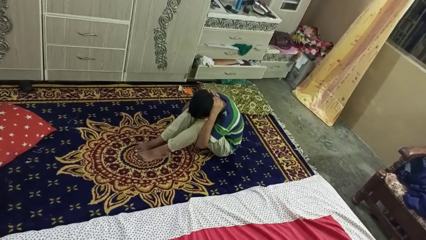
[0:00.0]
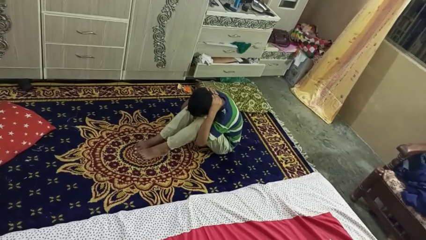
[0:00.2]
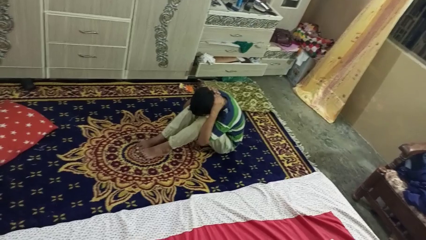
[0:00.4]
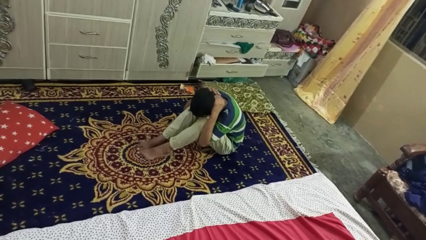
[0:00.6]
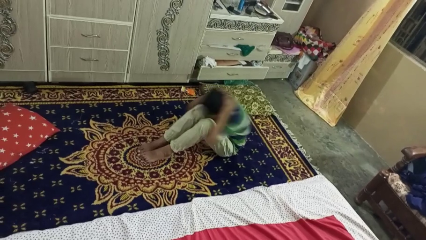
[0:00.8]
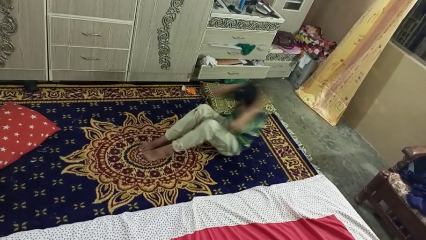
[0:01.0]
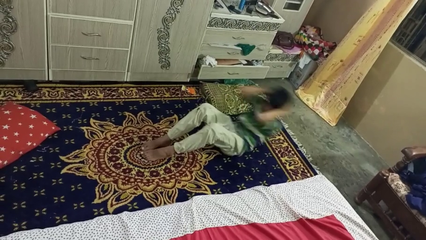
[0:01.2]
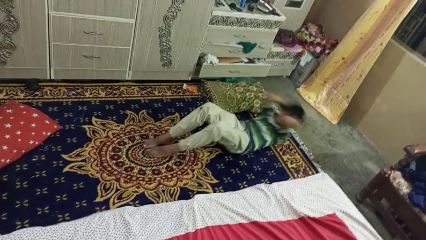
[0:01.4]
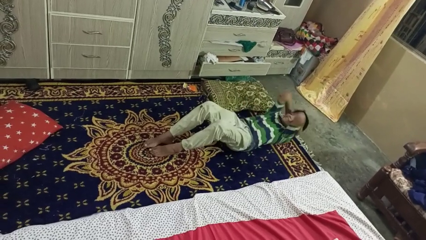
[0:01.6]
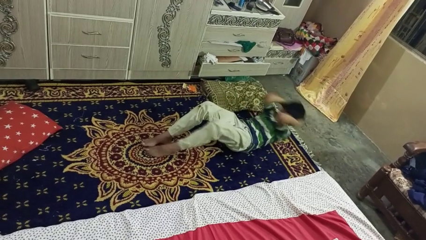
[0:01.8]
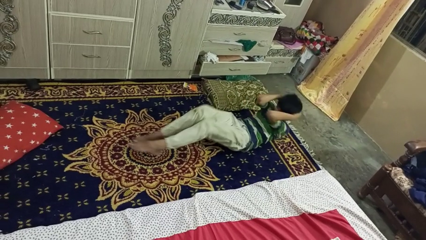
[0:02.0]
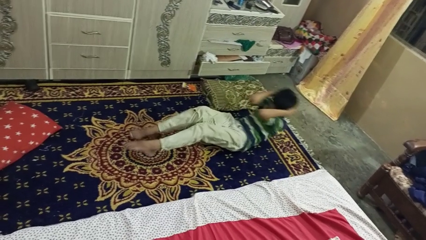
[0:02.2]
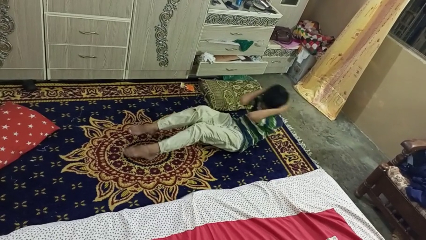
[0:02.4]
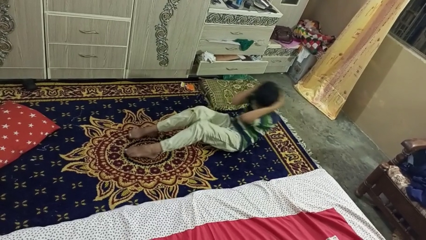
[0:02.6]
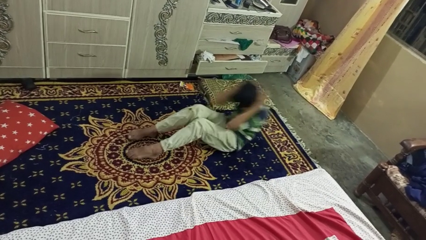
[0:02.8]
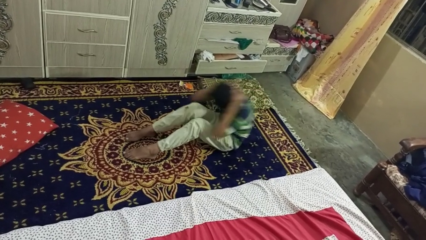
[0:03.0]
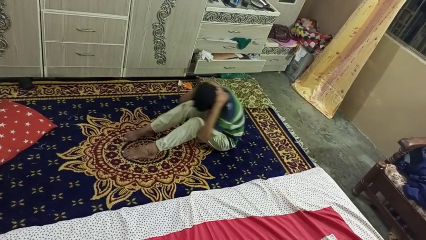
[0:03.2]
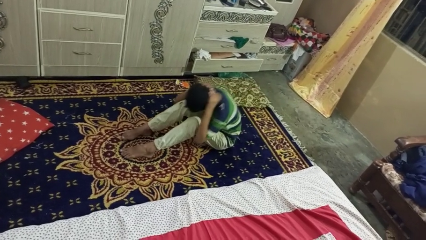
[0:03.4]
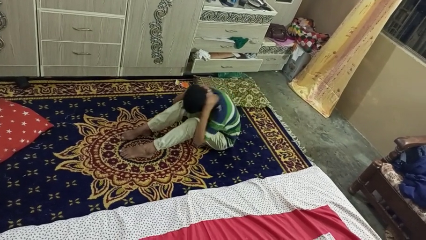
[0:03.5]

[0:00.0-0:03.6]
person exercises with situp

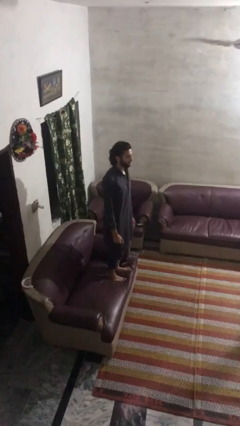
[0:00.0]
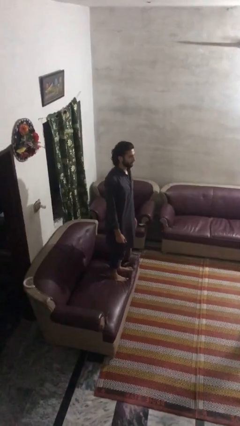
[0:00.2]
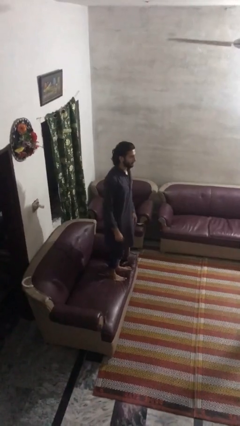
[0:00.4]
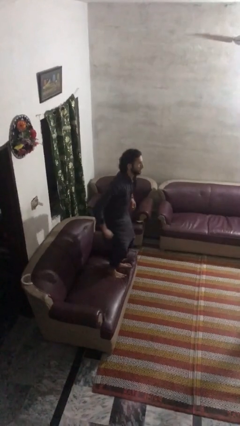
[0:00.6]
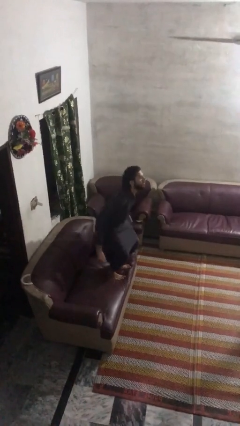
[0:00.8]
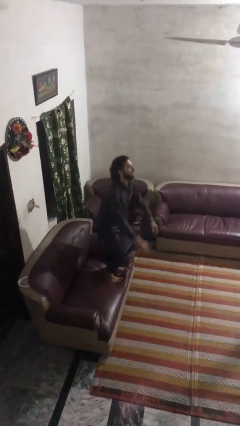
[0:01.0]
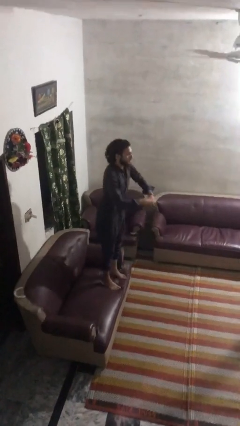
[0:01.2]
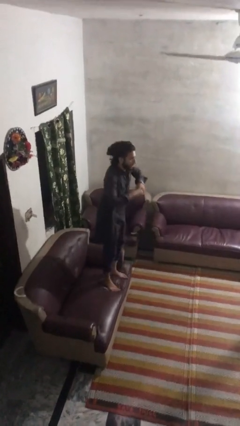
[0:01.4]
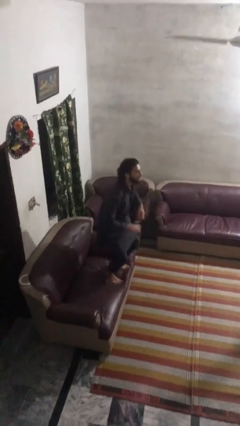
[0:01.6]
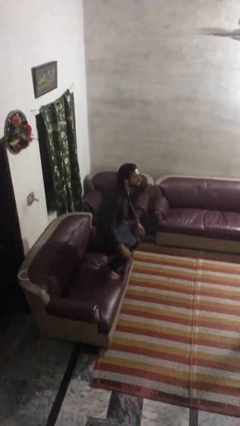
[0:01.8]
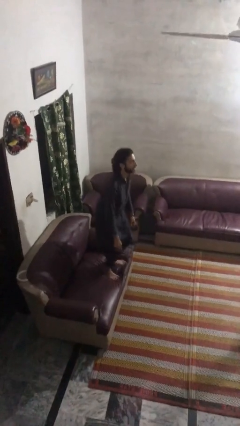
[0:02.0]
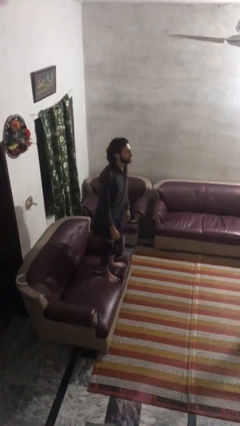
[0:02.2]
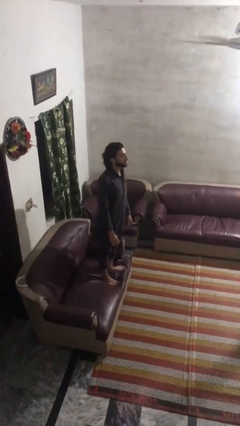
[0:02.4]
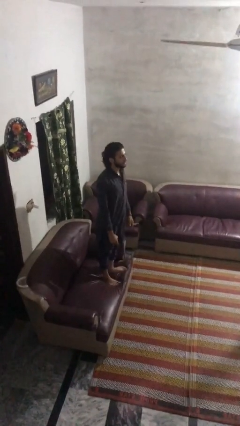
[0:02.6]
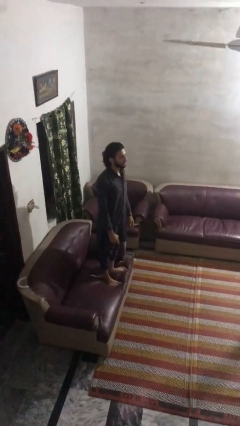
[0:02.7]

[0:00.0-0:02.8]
person jumps on couch

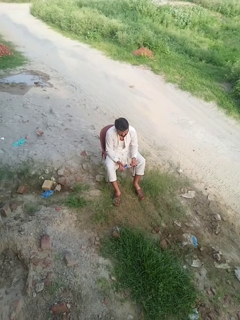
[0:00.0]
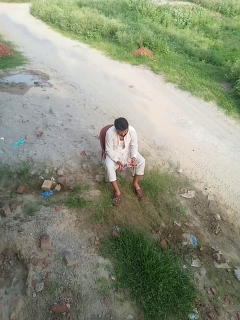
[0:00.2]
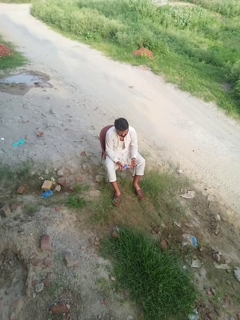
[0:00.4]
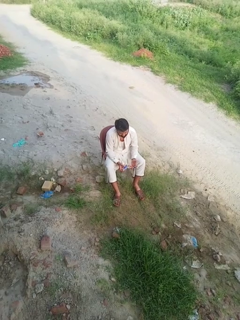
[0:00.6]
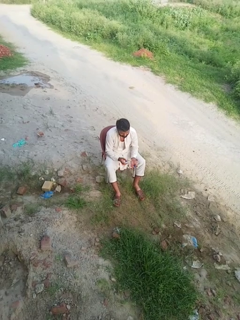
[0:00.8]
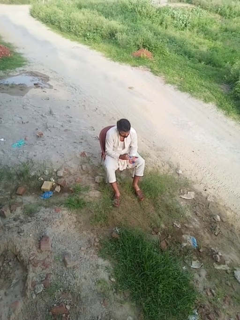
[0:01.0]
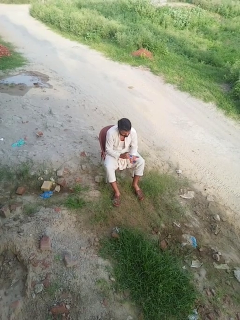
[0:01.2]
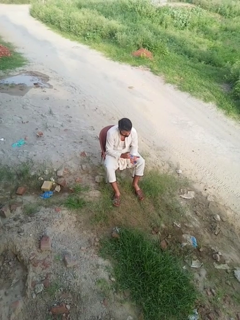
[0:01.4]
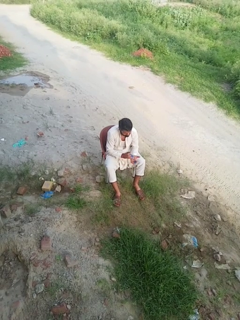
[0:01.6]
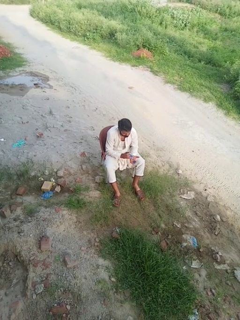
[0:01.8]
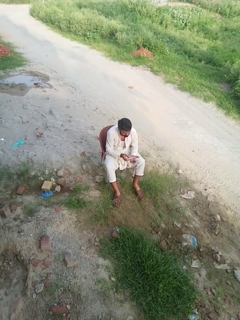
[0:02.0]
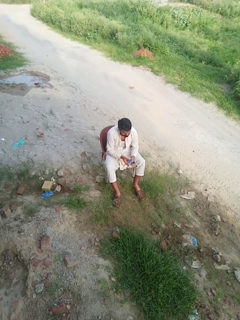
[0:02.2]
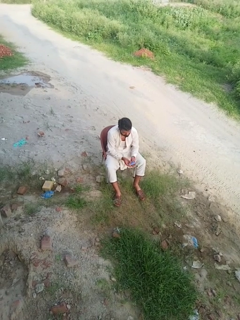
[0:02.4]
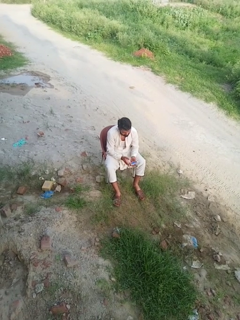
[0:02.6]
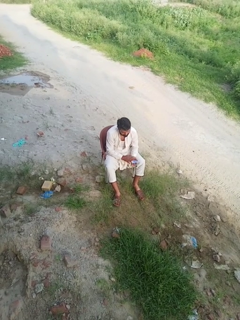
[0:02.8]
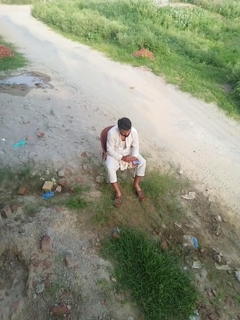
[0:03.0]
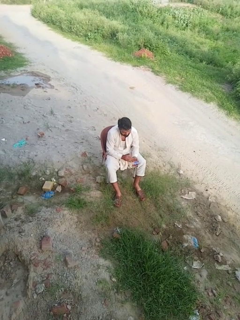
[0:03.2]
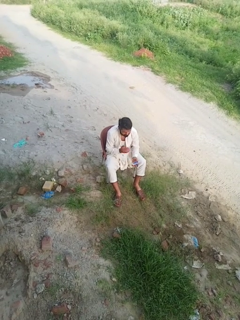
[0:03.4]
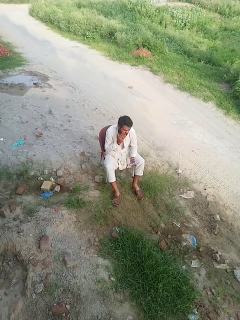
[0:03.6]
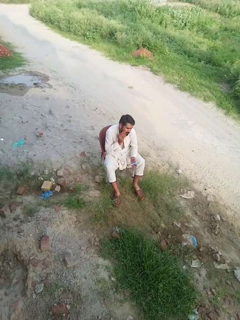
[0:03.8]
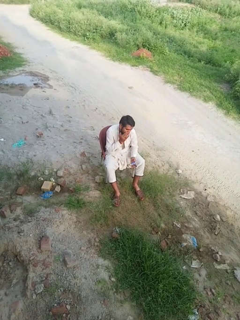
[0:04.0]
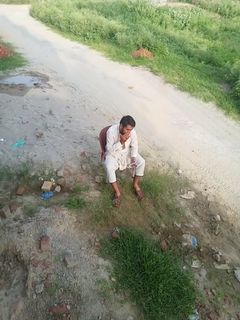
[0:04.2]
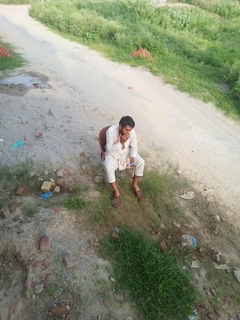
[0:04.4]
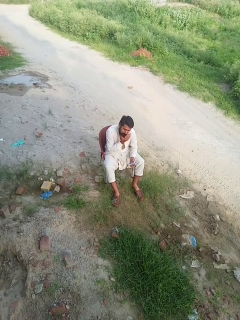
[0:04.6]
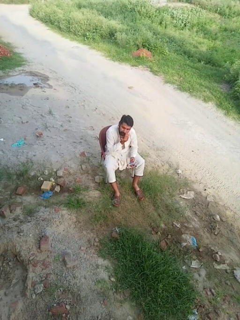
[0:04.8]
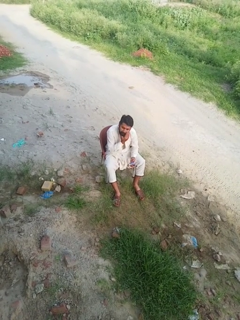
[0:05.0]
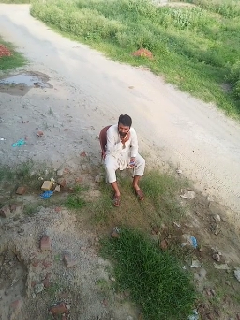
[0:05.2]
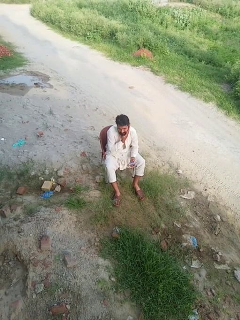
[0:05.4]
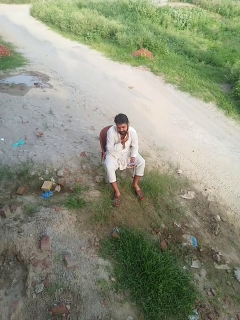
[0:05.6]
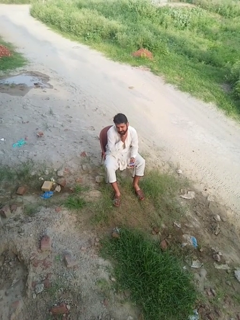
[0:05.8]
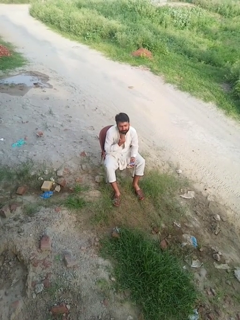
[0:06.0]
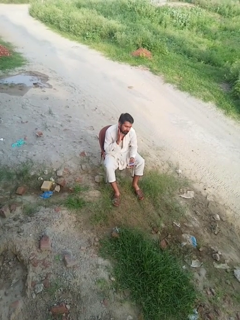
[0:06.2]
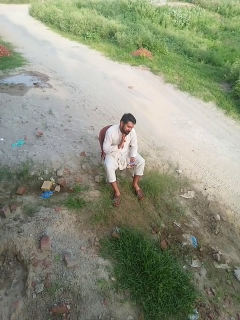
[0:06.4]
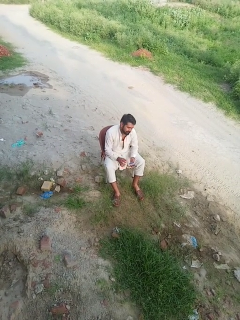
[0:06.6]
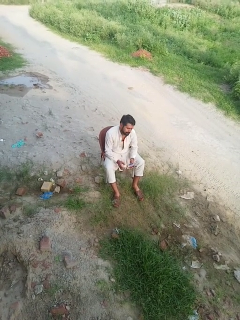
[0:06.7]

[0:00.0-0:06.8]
person applies facial moisturizer

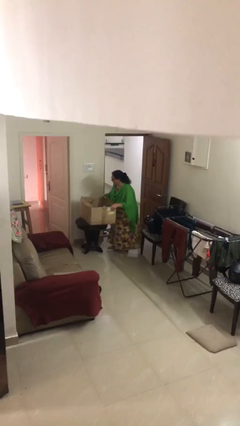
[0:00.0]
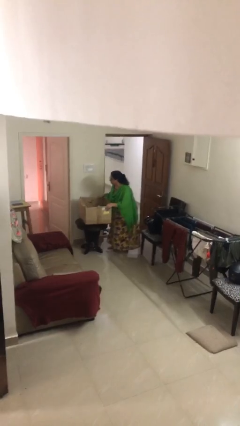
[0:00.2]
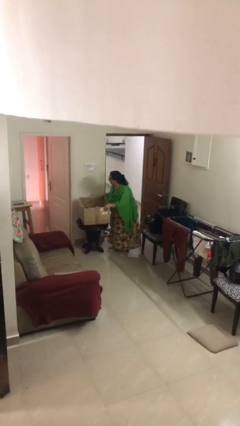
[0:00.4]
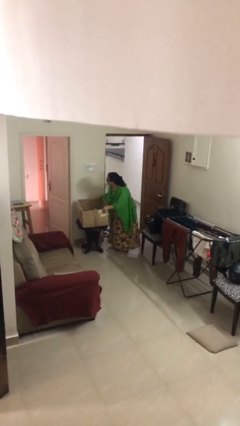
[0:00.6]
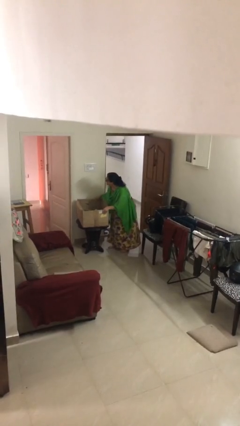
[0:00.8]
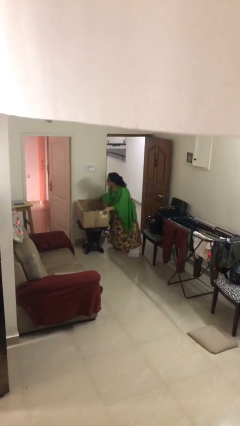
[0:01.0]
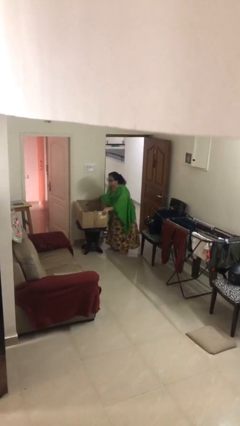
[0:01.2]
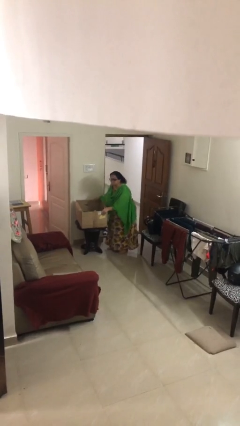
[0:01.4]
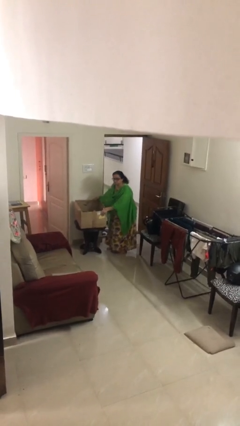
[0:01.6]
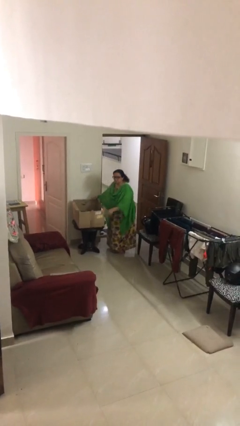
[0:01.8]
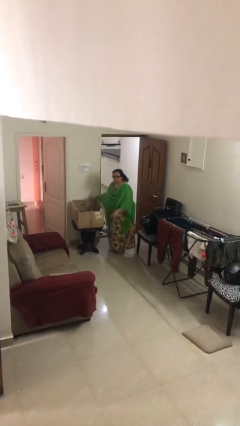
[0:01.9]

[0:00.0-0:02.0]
person puts down object on table

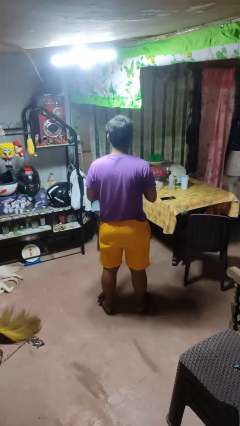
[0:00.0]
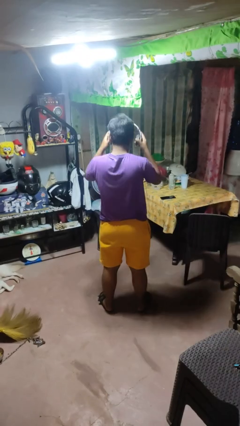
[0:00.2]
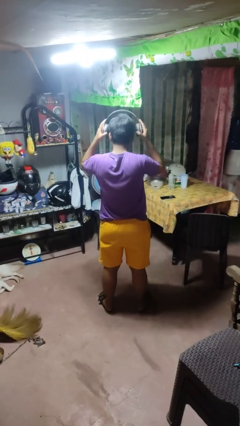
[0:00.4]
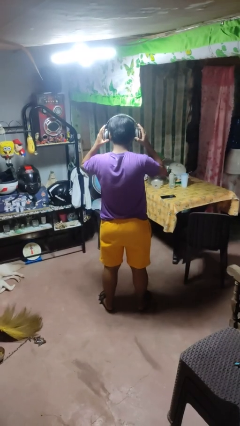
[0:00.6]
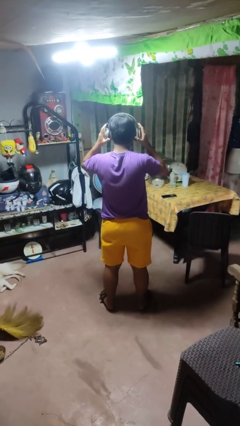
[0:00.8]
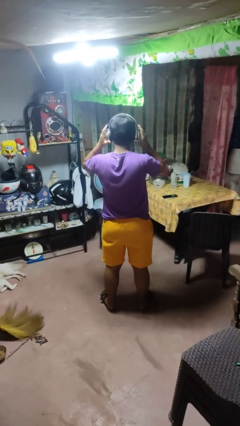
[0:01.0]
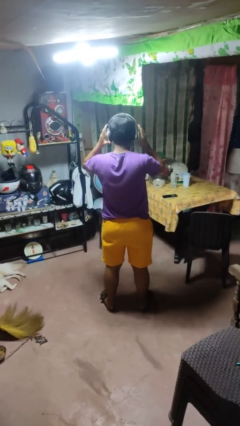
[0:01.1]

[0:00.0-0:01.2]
person puts on headphones

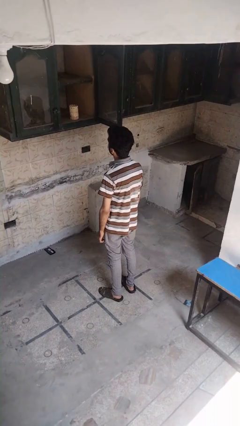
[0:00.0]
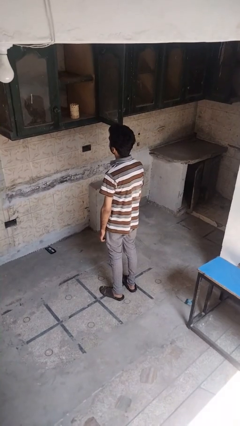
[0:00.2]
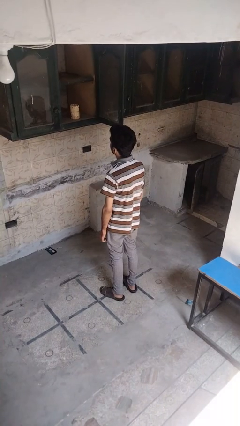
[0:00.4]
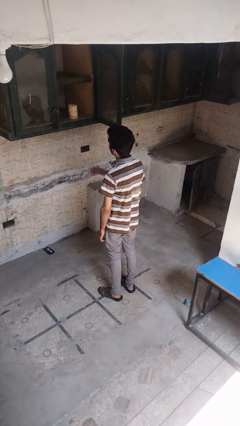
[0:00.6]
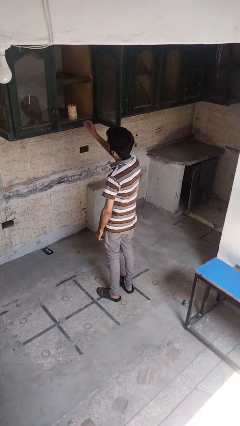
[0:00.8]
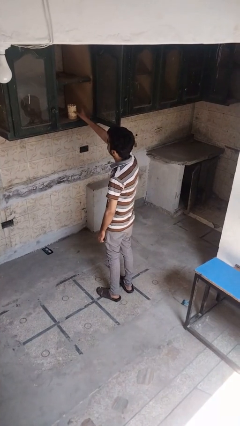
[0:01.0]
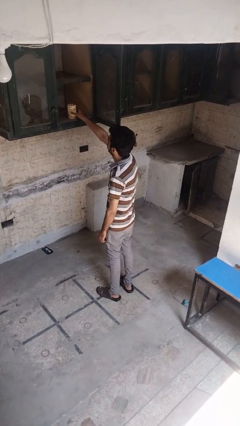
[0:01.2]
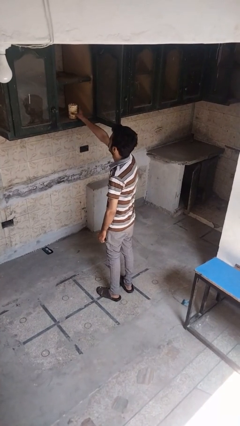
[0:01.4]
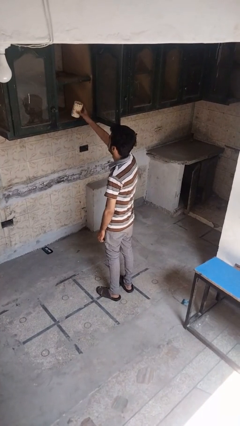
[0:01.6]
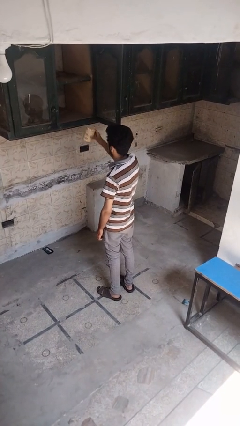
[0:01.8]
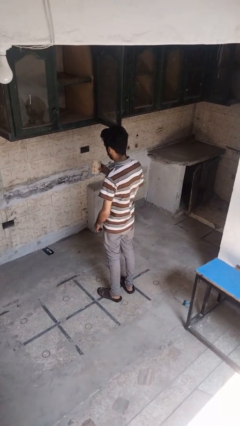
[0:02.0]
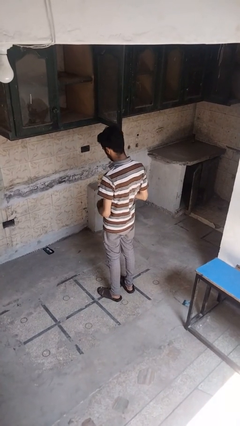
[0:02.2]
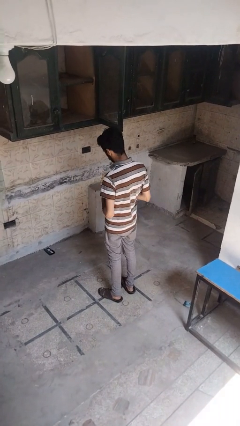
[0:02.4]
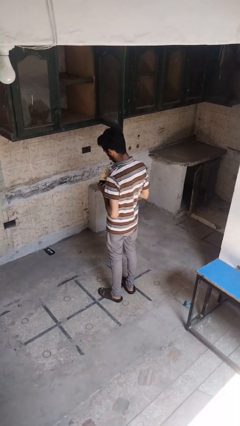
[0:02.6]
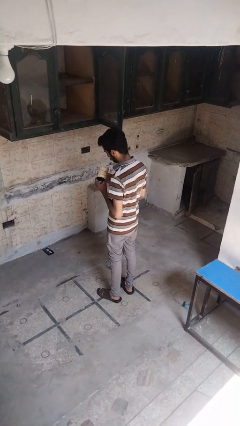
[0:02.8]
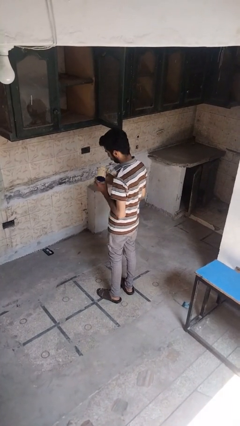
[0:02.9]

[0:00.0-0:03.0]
person picks up object from cabinet
